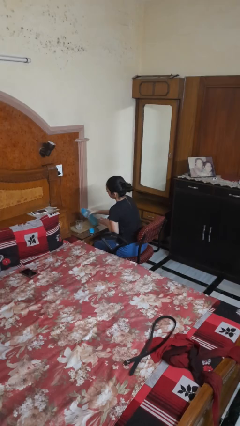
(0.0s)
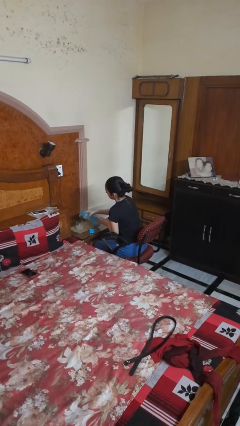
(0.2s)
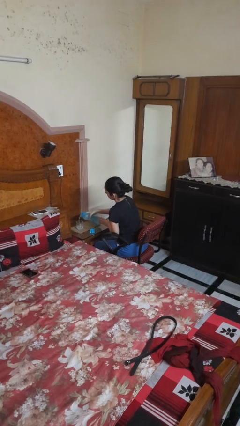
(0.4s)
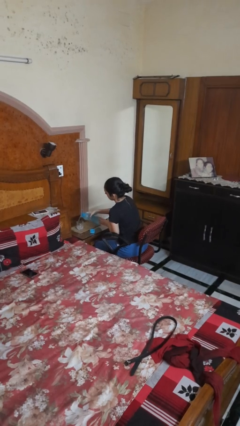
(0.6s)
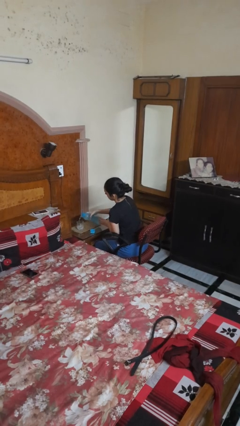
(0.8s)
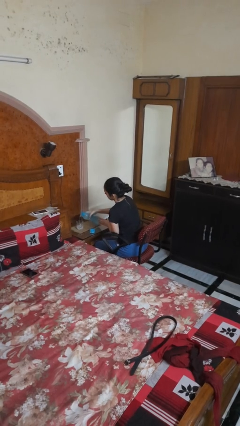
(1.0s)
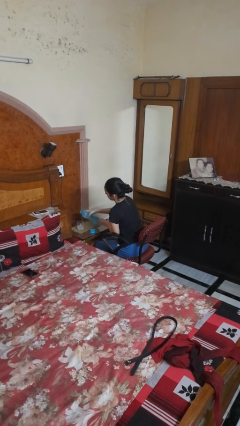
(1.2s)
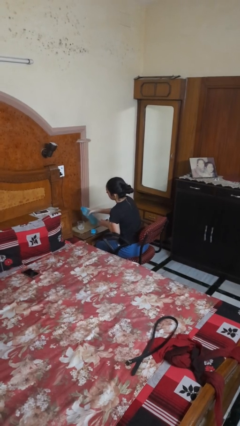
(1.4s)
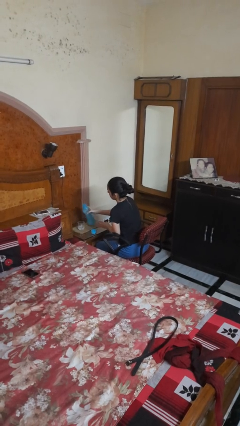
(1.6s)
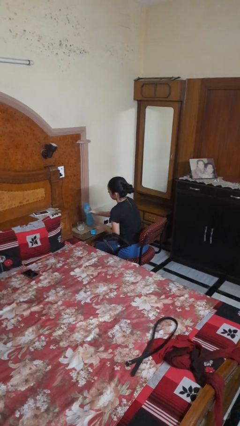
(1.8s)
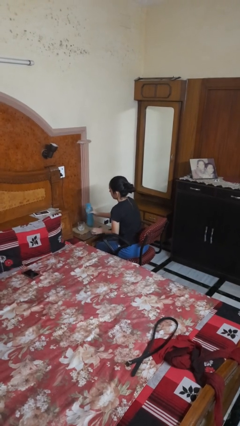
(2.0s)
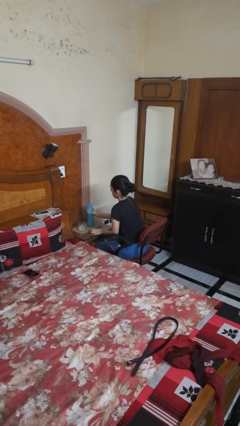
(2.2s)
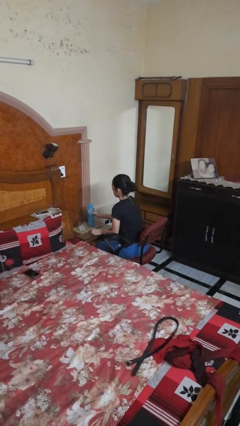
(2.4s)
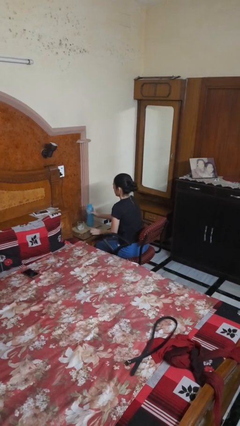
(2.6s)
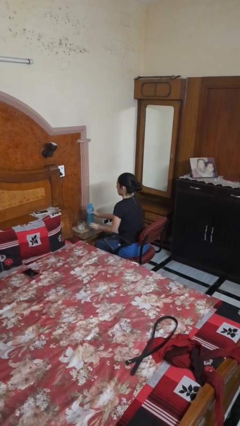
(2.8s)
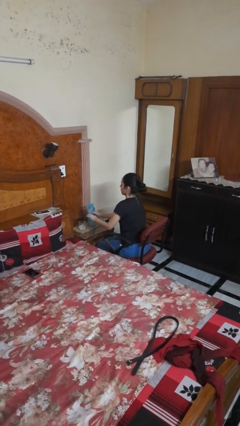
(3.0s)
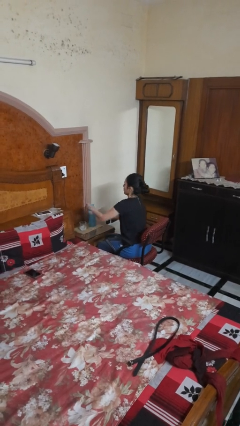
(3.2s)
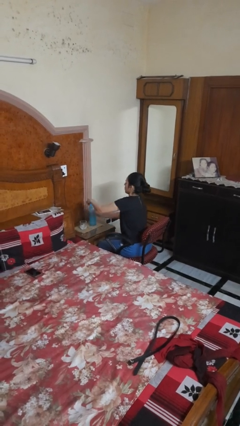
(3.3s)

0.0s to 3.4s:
person pours liquid into cup

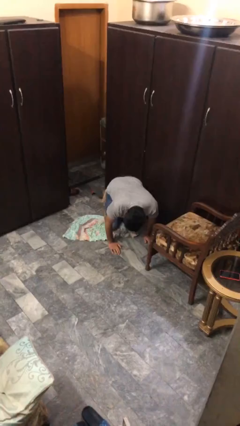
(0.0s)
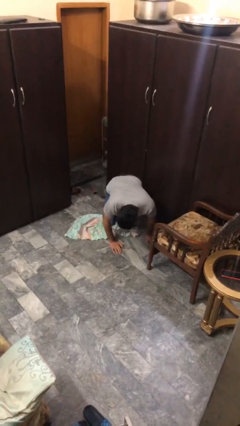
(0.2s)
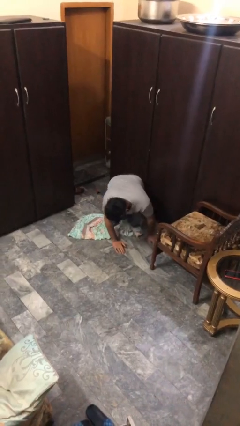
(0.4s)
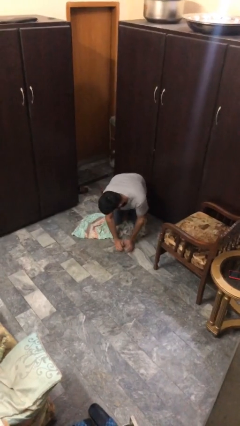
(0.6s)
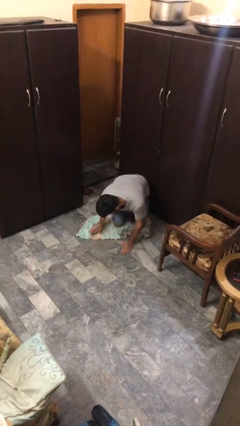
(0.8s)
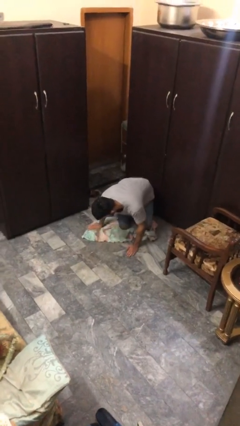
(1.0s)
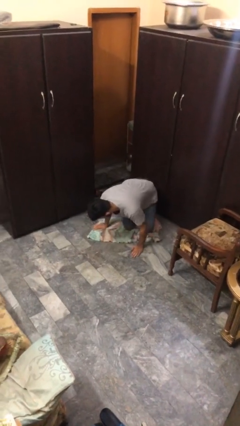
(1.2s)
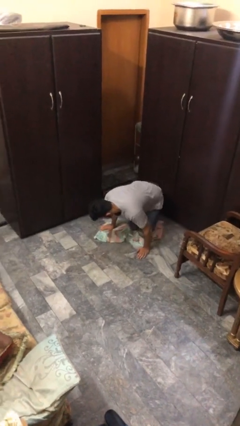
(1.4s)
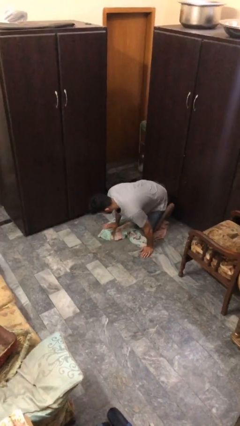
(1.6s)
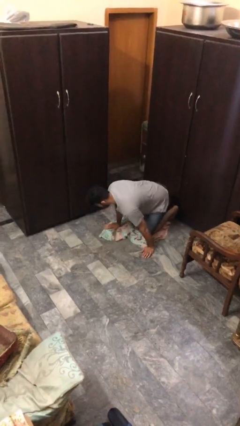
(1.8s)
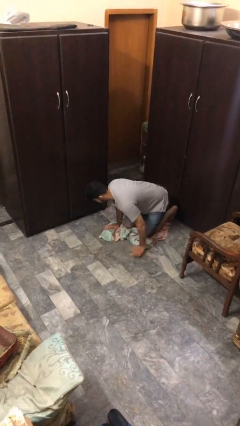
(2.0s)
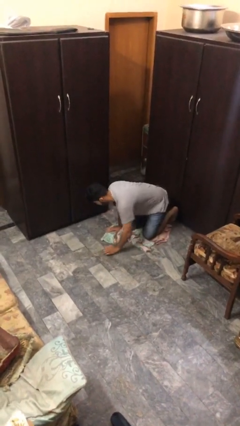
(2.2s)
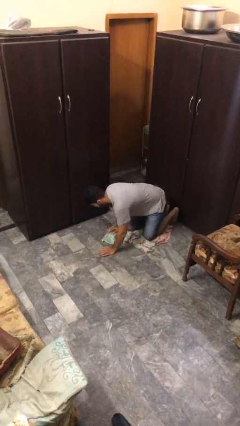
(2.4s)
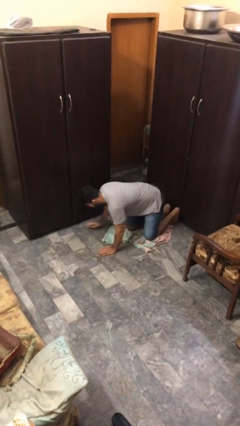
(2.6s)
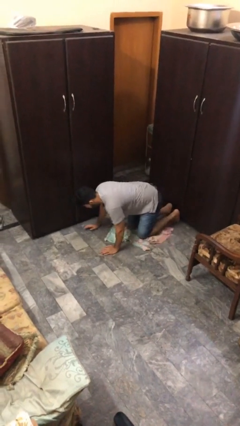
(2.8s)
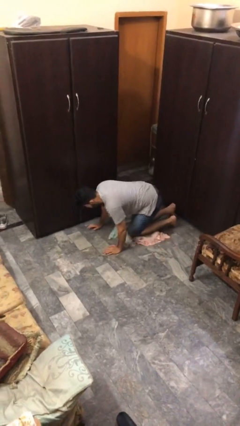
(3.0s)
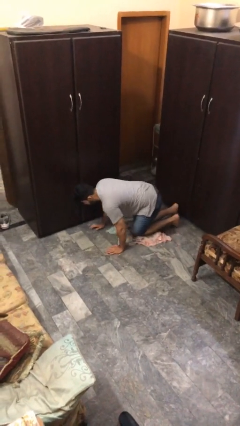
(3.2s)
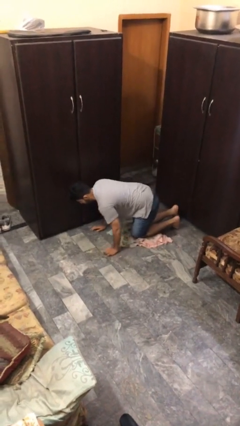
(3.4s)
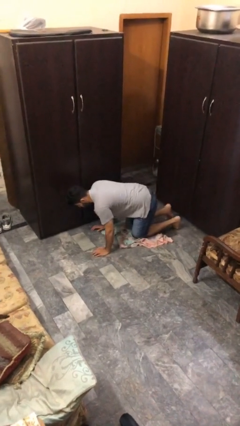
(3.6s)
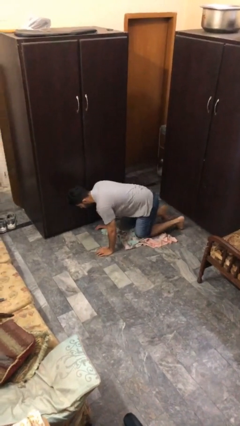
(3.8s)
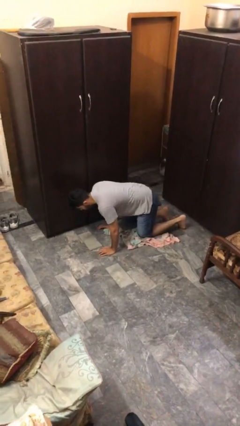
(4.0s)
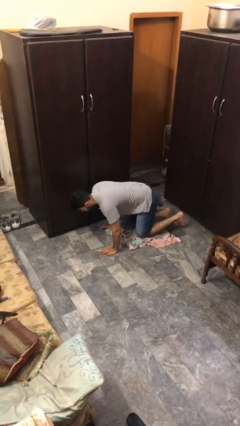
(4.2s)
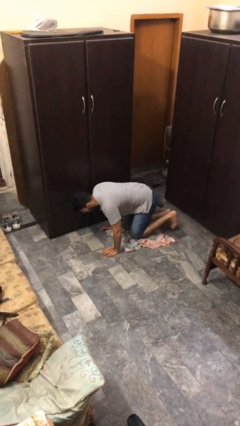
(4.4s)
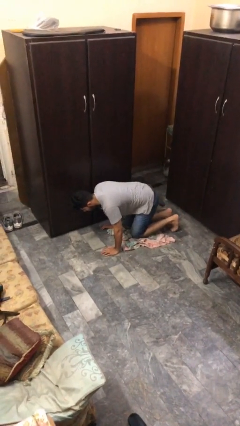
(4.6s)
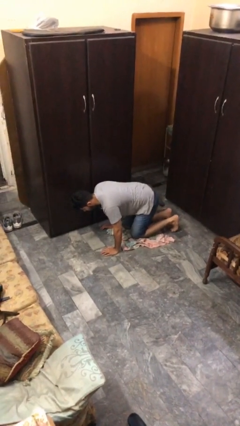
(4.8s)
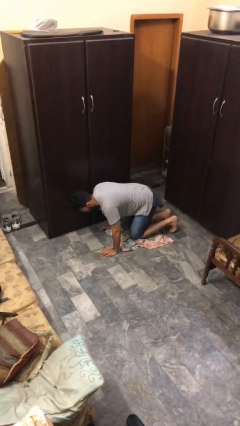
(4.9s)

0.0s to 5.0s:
person crawls

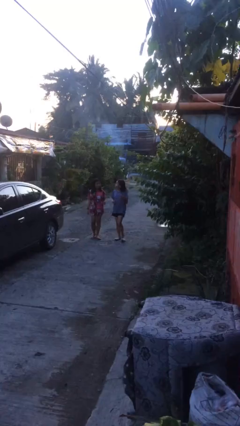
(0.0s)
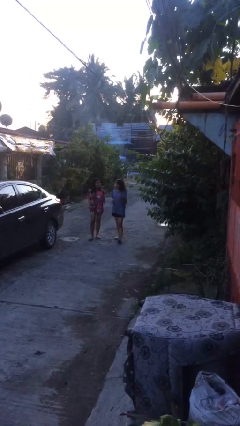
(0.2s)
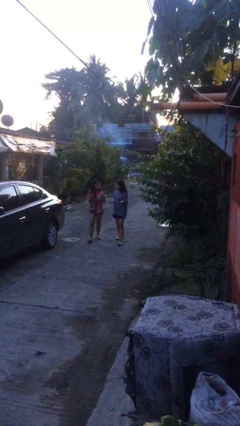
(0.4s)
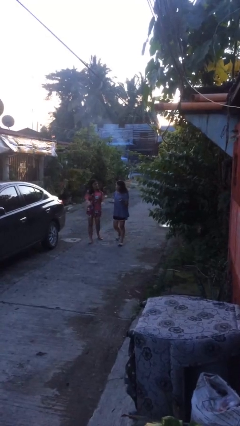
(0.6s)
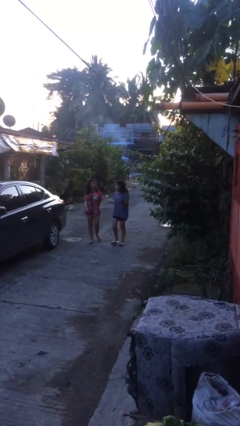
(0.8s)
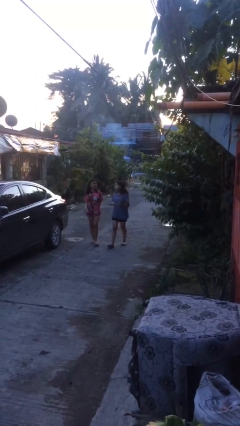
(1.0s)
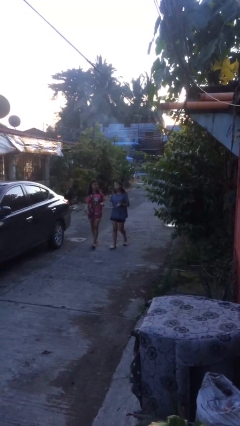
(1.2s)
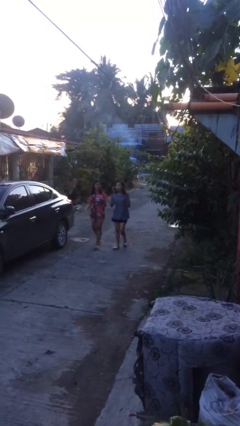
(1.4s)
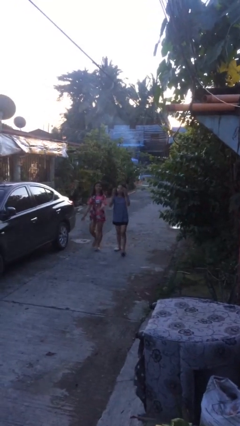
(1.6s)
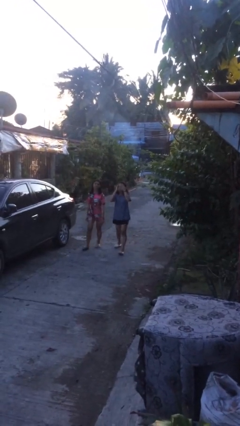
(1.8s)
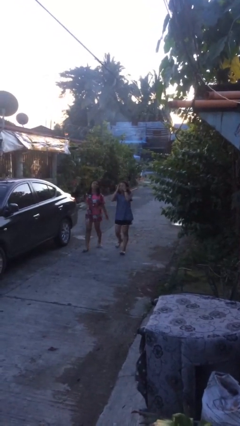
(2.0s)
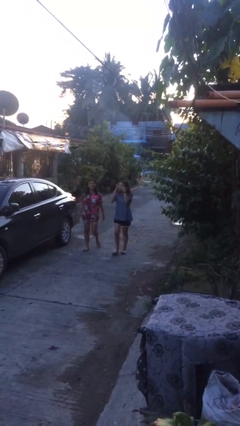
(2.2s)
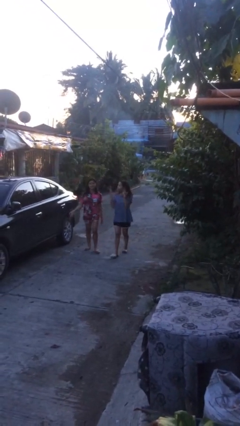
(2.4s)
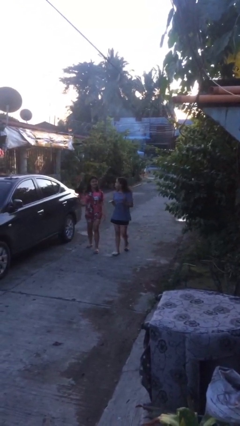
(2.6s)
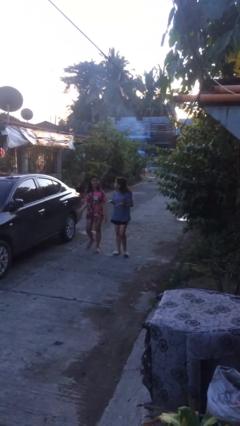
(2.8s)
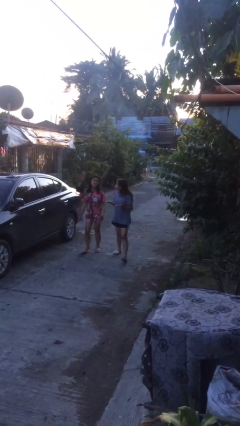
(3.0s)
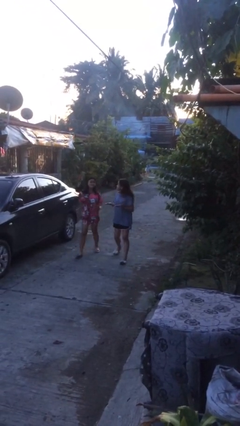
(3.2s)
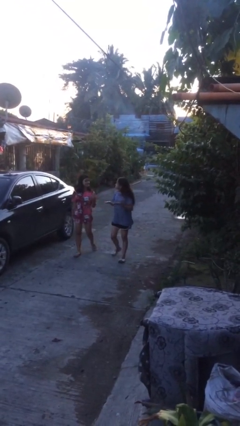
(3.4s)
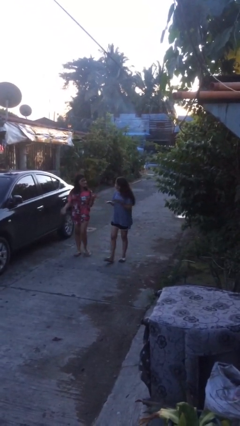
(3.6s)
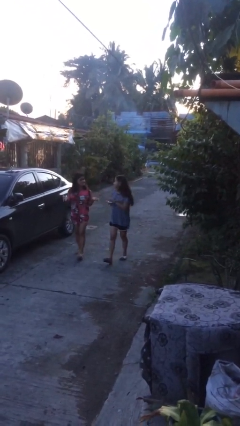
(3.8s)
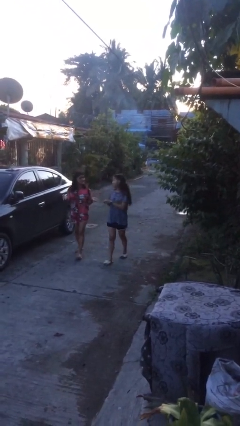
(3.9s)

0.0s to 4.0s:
person talks to person

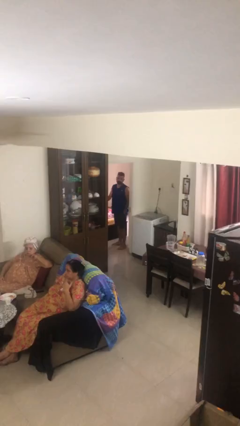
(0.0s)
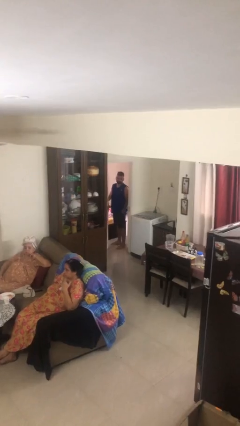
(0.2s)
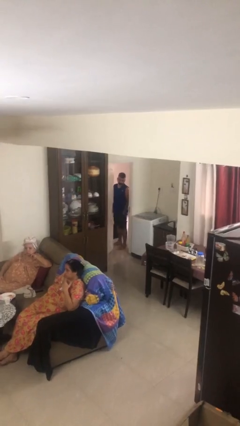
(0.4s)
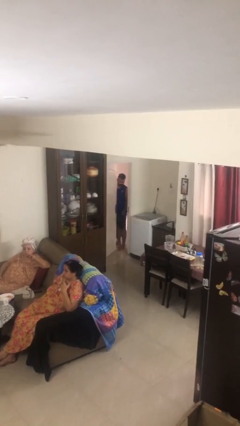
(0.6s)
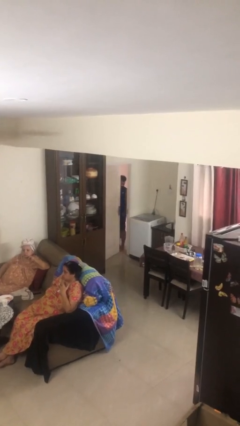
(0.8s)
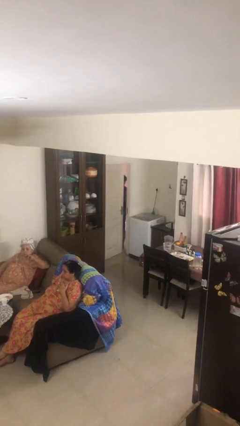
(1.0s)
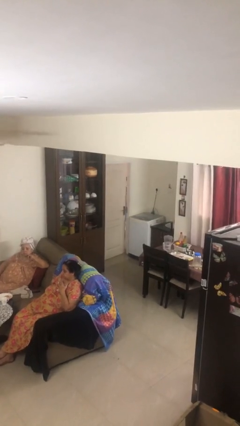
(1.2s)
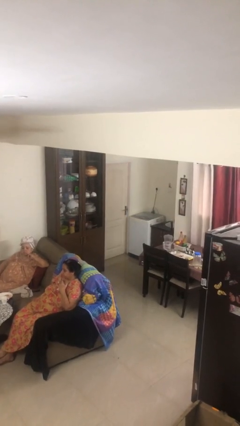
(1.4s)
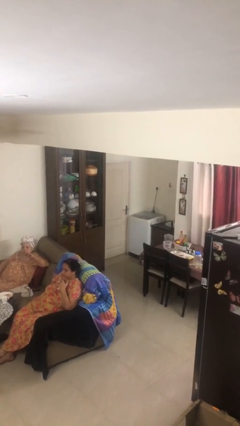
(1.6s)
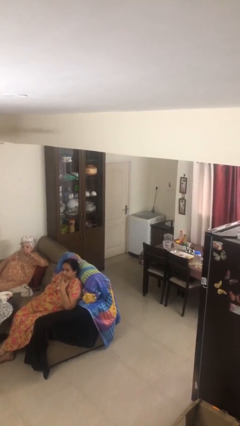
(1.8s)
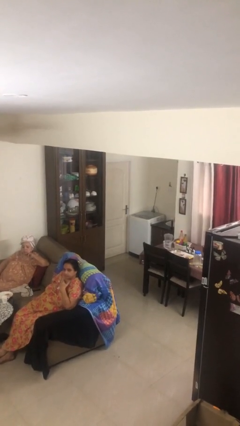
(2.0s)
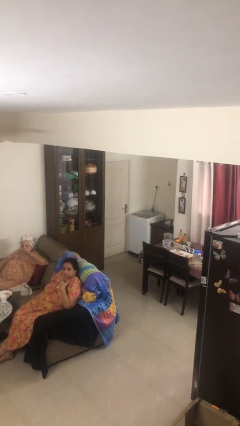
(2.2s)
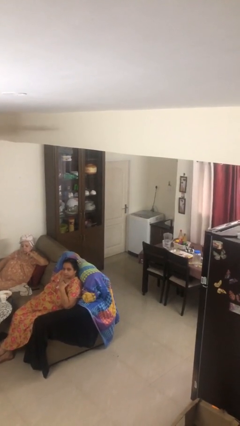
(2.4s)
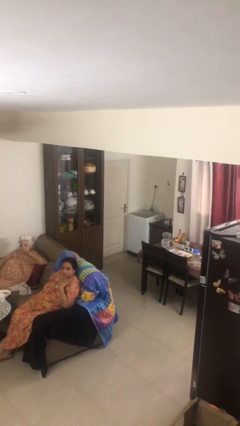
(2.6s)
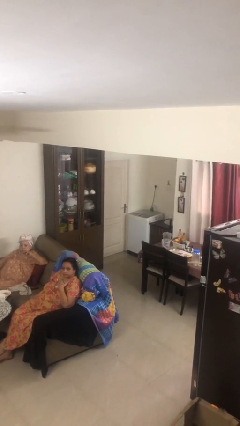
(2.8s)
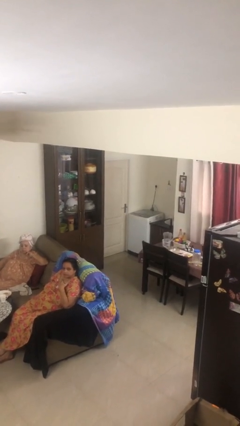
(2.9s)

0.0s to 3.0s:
person closes facility door

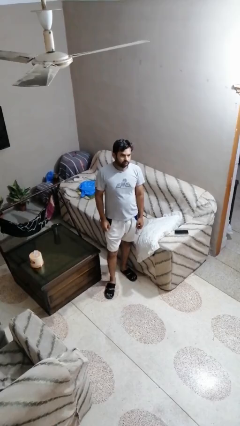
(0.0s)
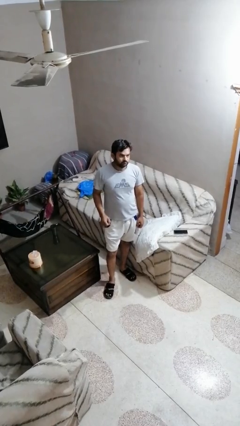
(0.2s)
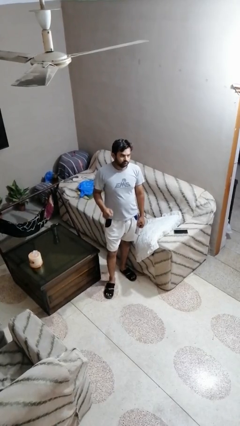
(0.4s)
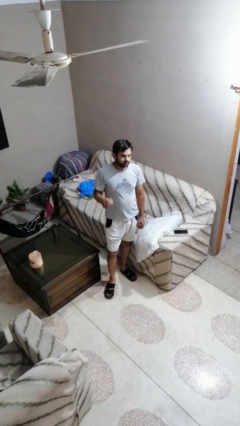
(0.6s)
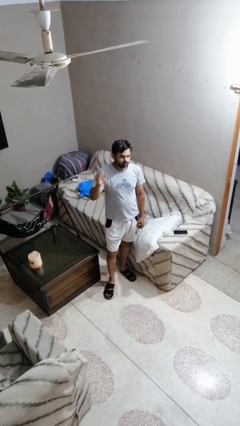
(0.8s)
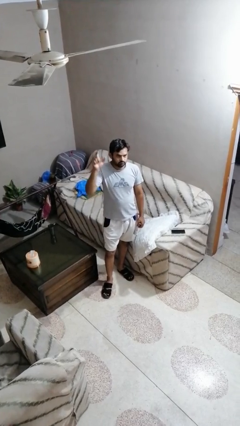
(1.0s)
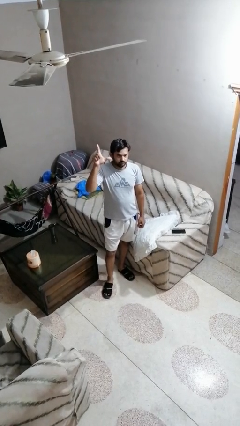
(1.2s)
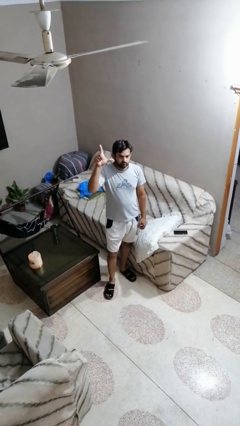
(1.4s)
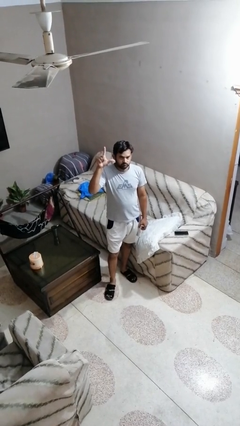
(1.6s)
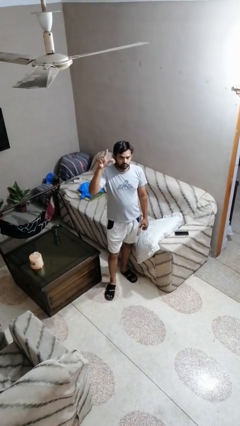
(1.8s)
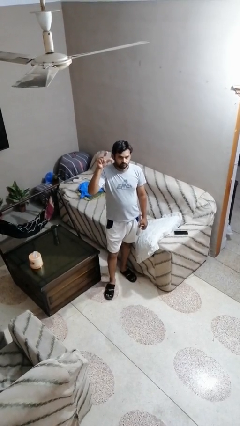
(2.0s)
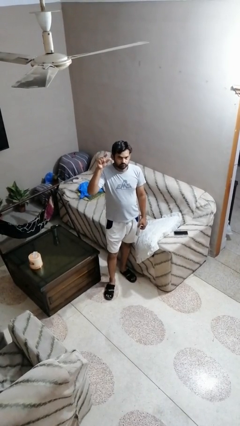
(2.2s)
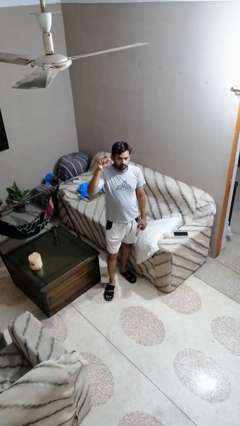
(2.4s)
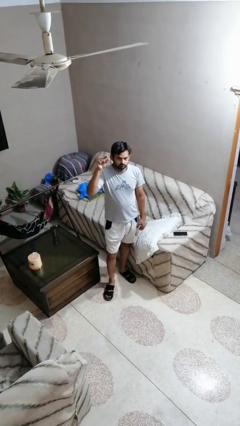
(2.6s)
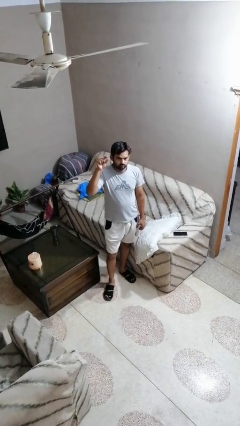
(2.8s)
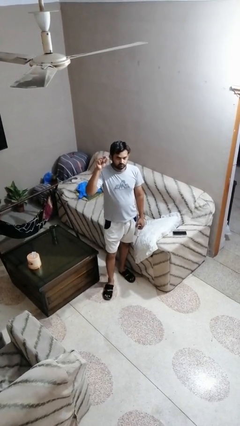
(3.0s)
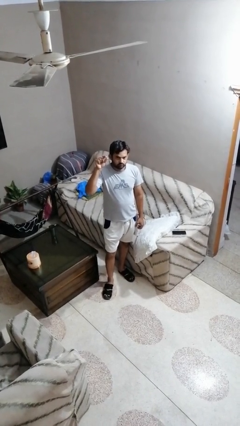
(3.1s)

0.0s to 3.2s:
person gestures zoom in
